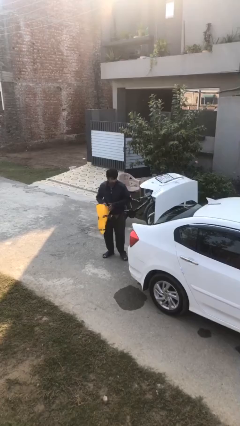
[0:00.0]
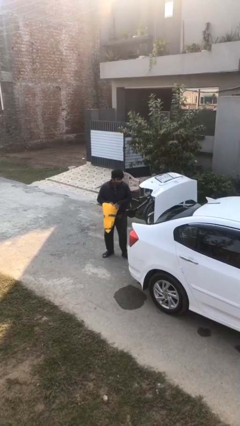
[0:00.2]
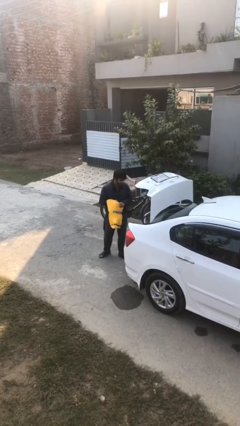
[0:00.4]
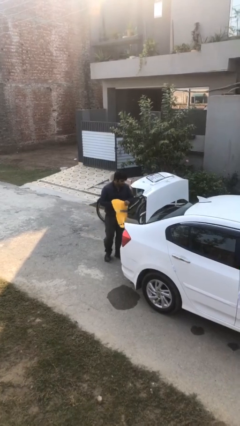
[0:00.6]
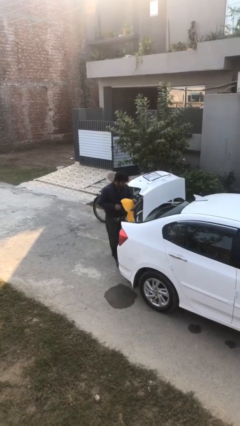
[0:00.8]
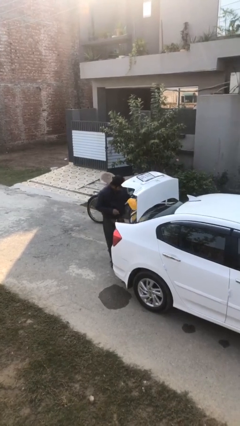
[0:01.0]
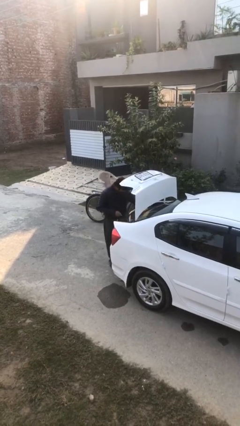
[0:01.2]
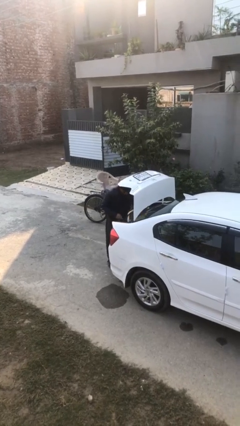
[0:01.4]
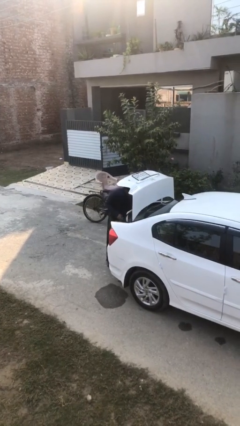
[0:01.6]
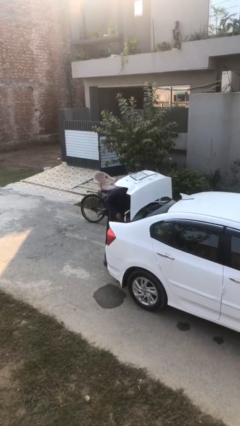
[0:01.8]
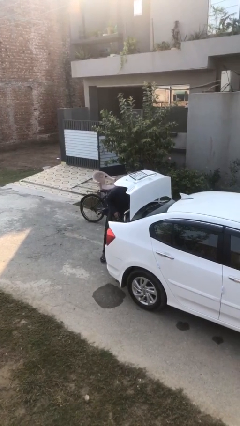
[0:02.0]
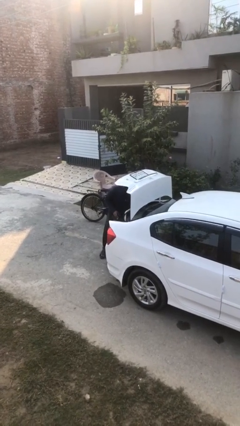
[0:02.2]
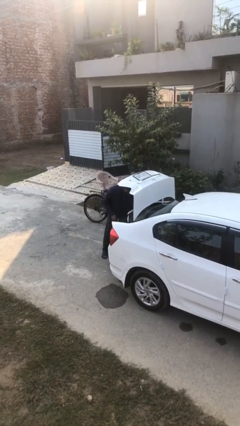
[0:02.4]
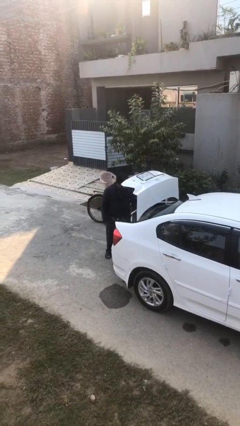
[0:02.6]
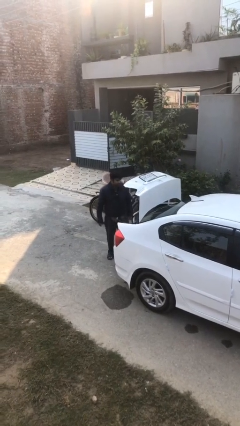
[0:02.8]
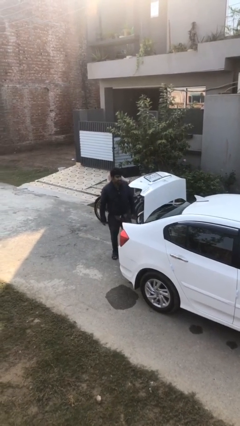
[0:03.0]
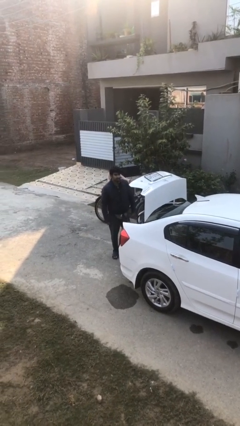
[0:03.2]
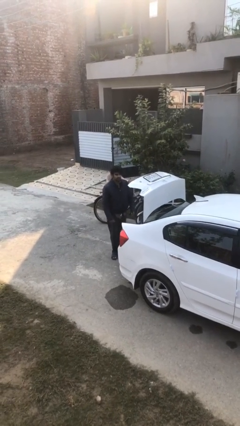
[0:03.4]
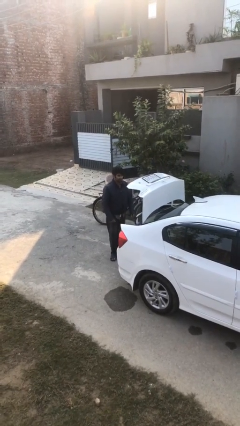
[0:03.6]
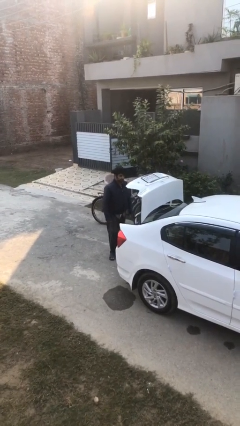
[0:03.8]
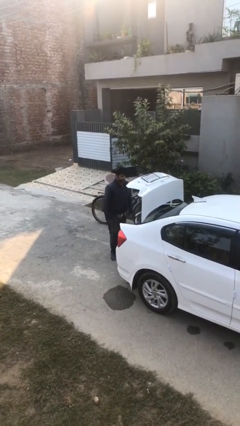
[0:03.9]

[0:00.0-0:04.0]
person loads car

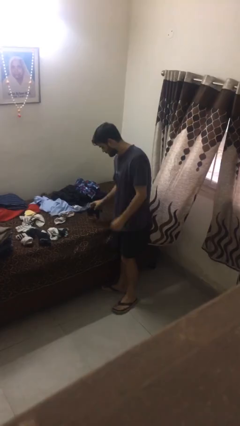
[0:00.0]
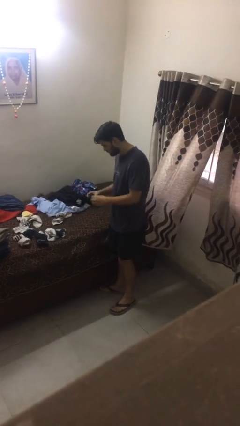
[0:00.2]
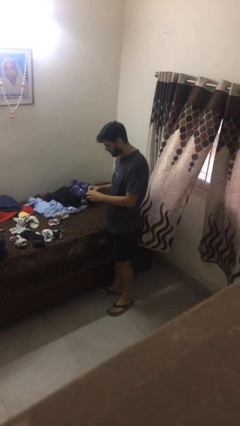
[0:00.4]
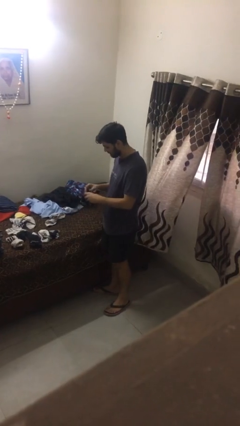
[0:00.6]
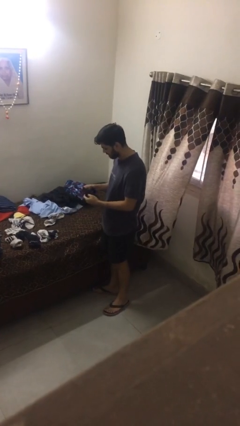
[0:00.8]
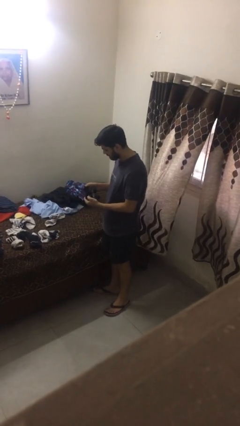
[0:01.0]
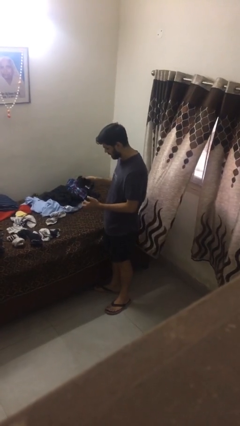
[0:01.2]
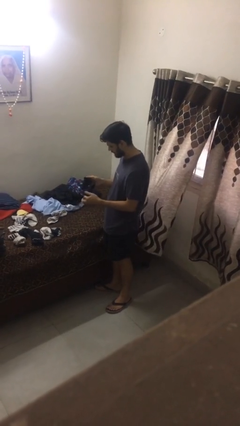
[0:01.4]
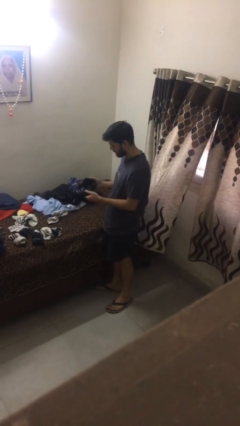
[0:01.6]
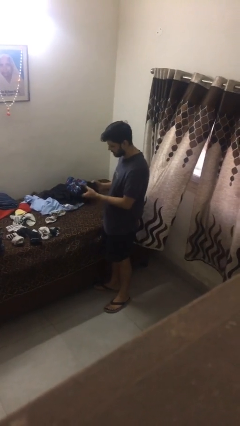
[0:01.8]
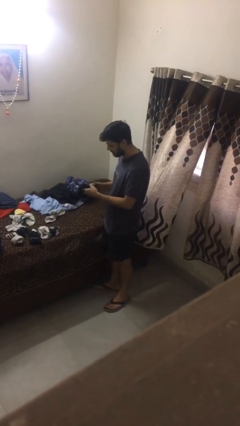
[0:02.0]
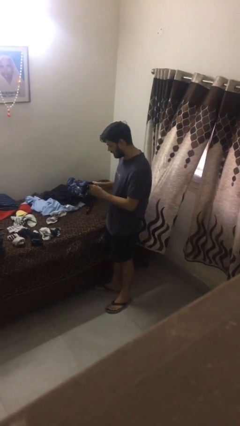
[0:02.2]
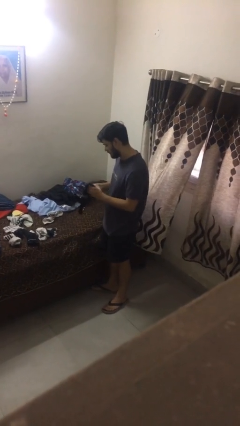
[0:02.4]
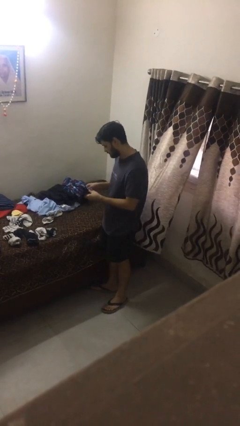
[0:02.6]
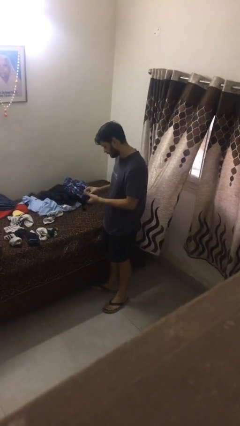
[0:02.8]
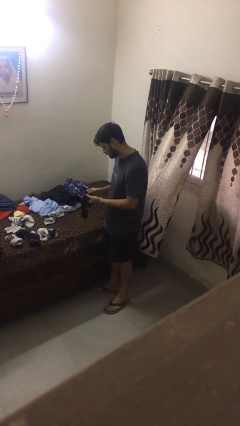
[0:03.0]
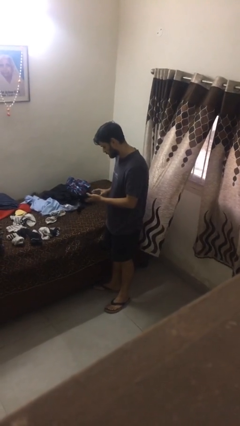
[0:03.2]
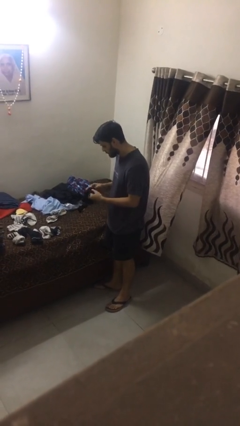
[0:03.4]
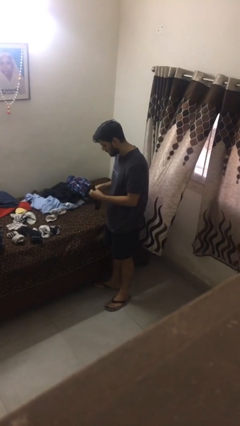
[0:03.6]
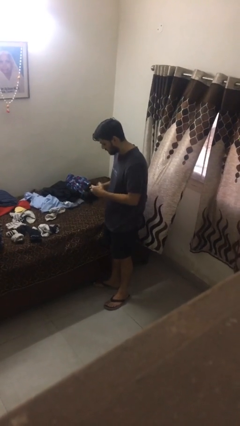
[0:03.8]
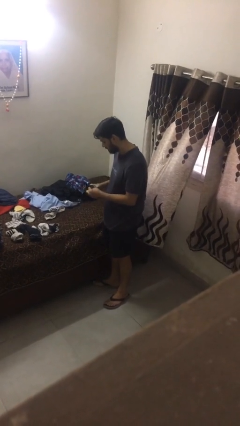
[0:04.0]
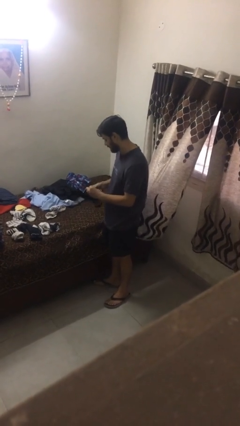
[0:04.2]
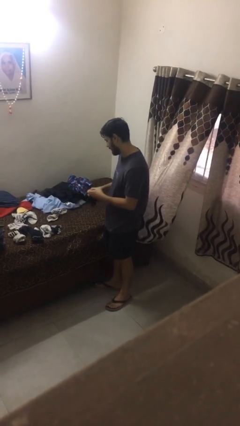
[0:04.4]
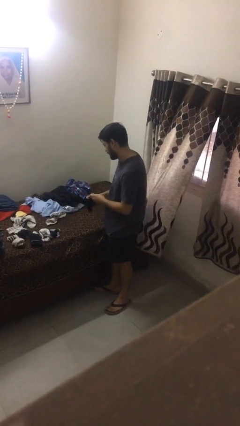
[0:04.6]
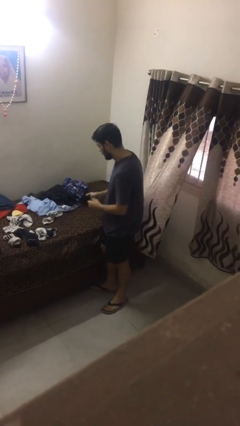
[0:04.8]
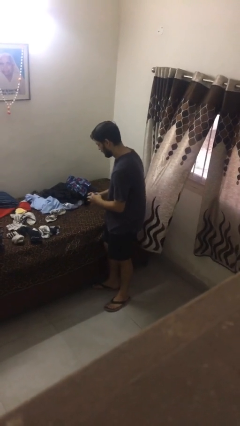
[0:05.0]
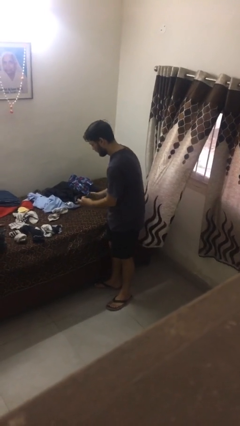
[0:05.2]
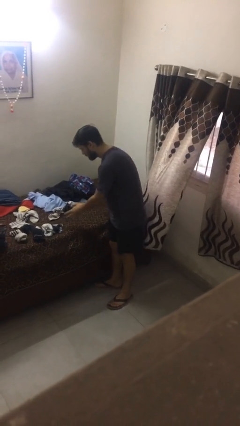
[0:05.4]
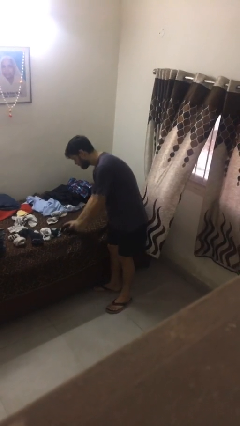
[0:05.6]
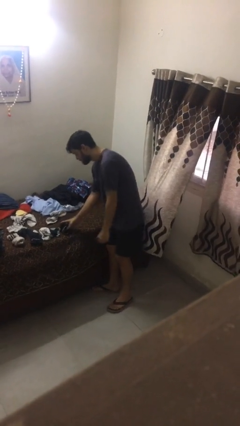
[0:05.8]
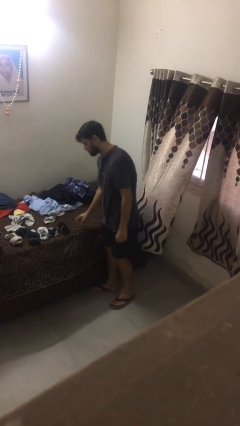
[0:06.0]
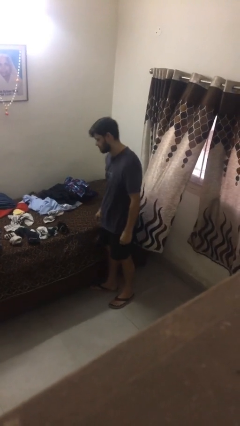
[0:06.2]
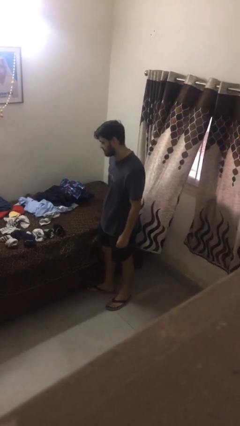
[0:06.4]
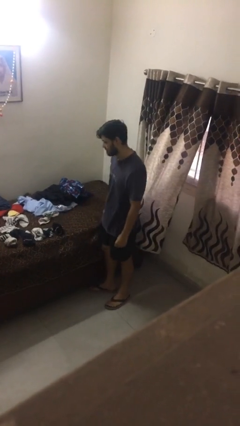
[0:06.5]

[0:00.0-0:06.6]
person folds socks

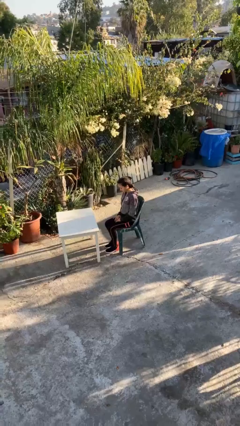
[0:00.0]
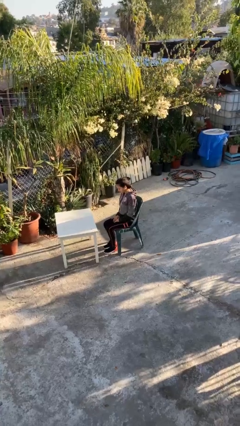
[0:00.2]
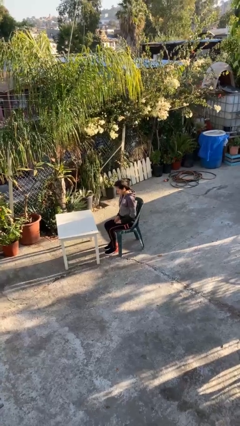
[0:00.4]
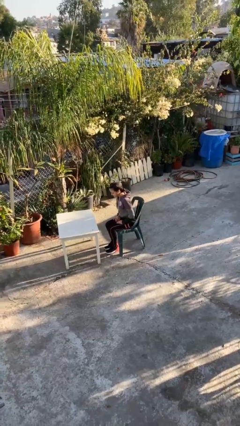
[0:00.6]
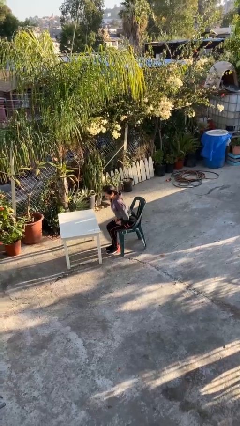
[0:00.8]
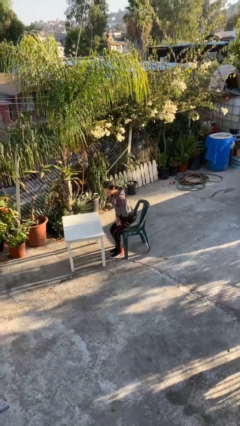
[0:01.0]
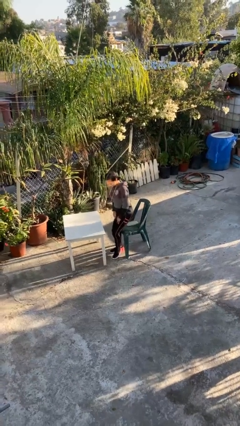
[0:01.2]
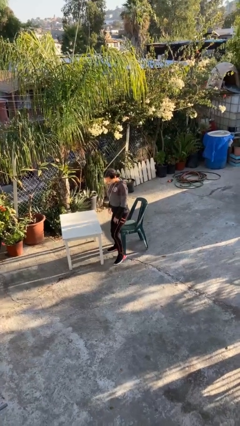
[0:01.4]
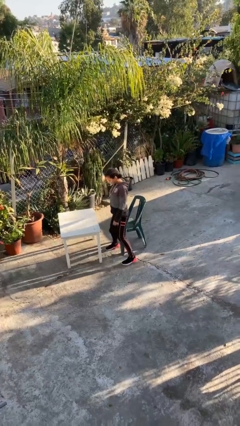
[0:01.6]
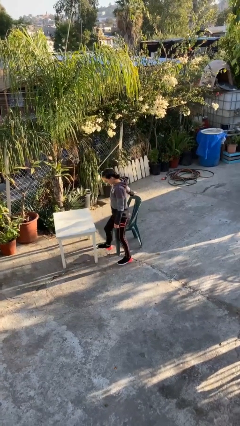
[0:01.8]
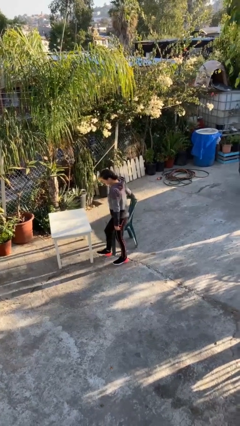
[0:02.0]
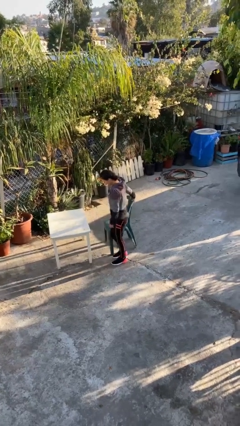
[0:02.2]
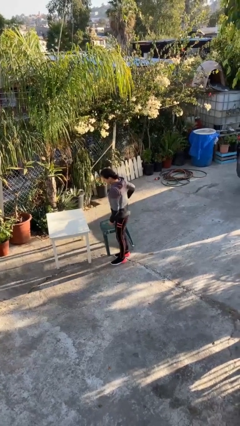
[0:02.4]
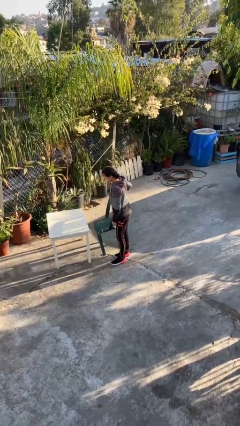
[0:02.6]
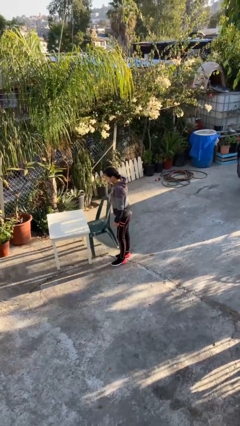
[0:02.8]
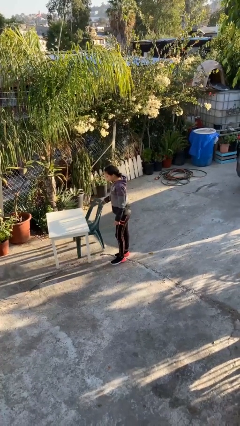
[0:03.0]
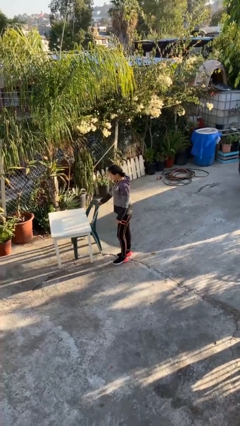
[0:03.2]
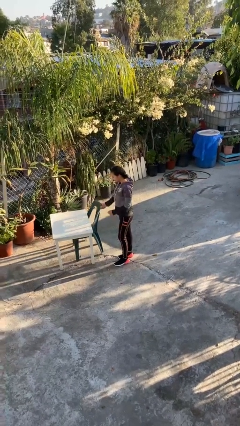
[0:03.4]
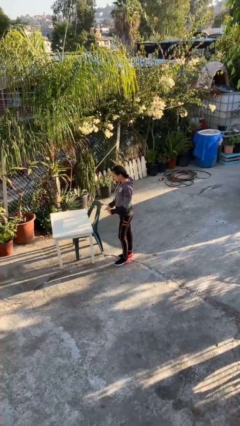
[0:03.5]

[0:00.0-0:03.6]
person stands up

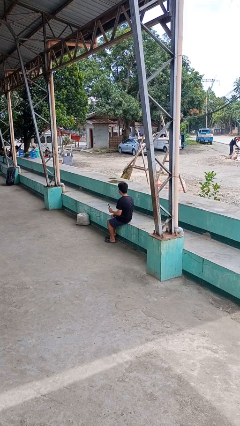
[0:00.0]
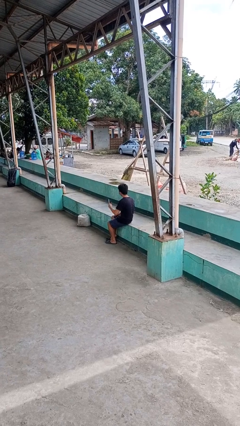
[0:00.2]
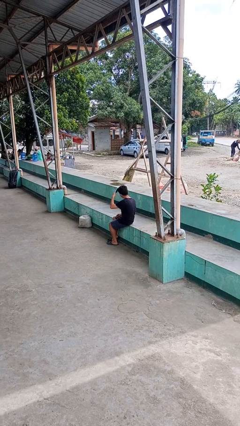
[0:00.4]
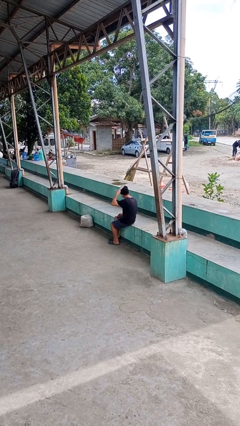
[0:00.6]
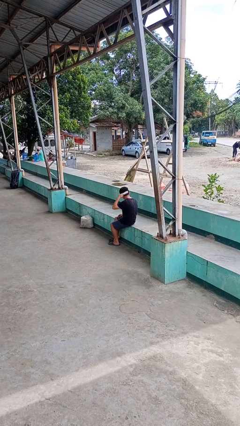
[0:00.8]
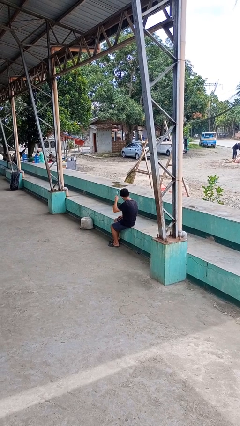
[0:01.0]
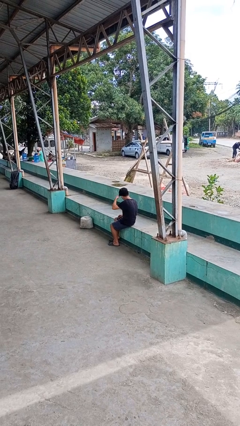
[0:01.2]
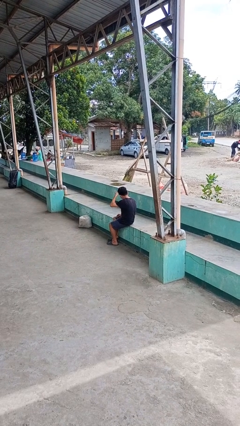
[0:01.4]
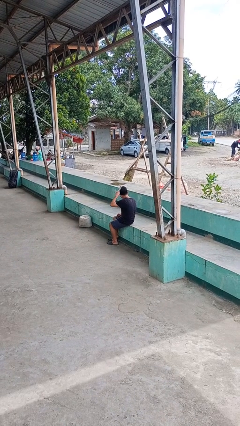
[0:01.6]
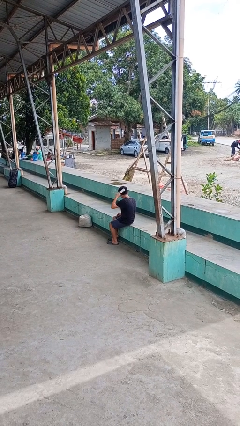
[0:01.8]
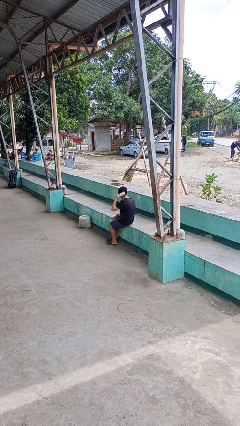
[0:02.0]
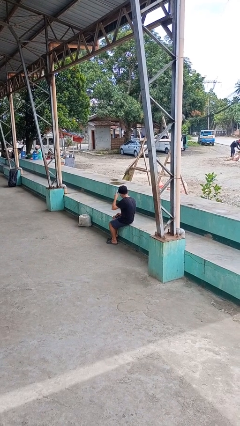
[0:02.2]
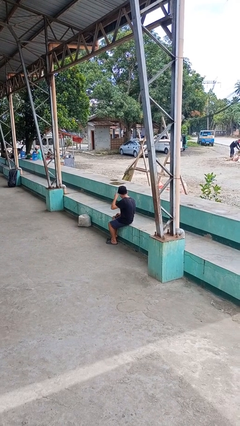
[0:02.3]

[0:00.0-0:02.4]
person brushes hair

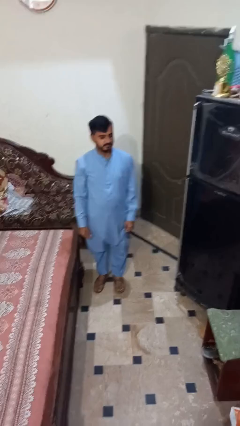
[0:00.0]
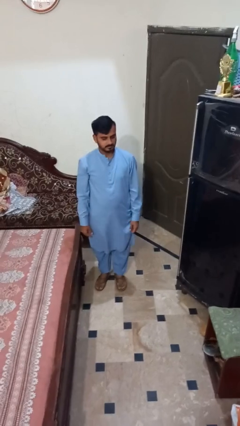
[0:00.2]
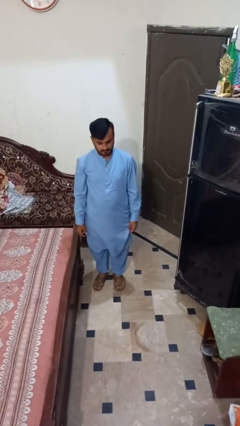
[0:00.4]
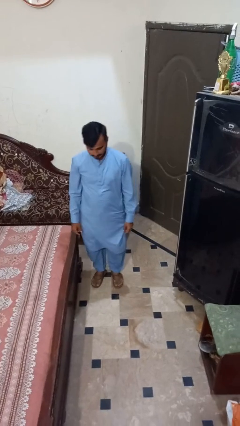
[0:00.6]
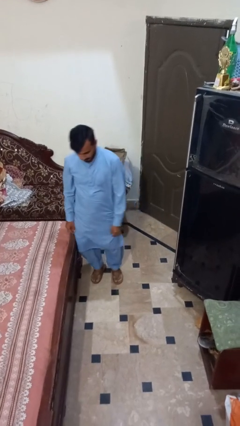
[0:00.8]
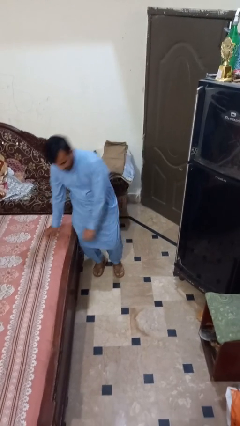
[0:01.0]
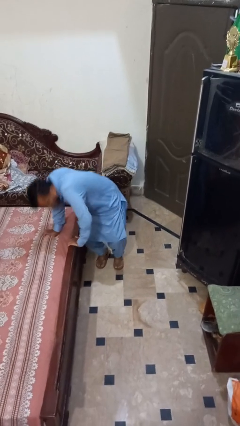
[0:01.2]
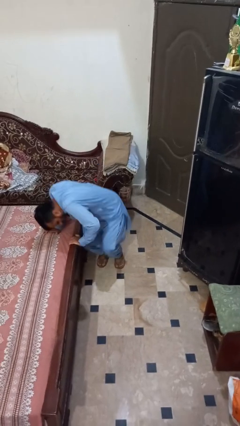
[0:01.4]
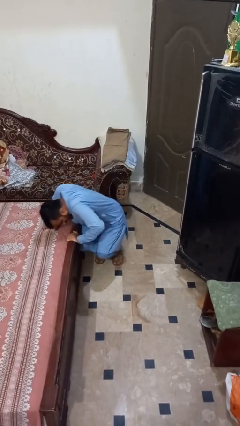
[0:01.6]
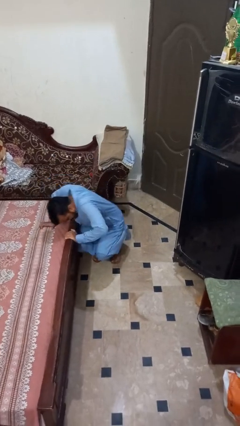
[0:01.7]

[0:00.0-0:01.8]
person trips on object on floor
